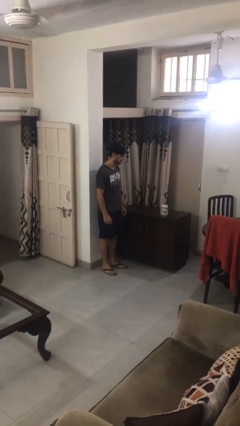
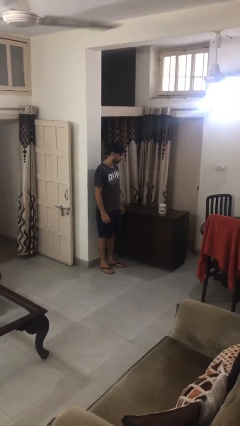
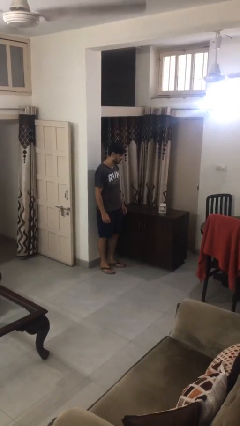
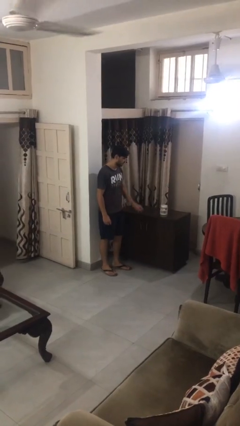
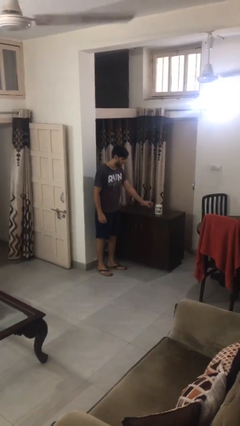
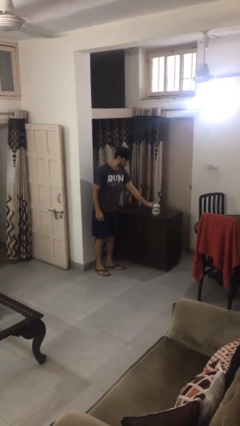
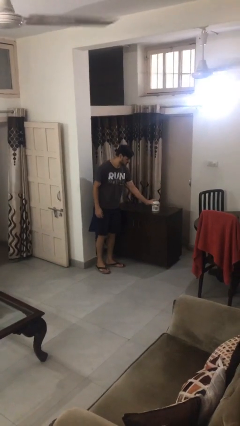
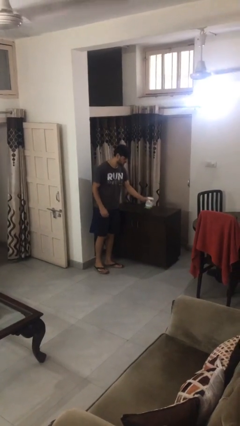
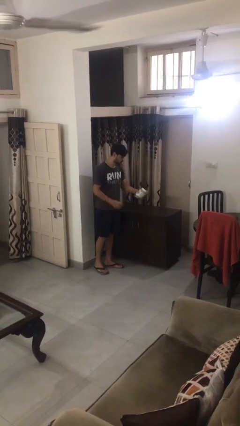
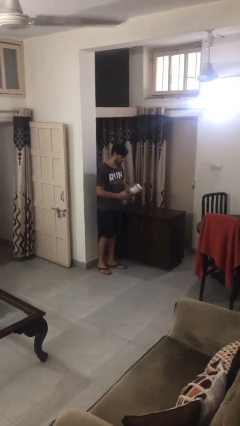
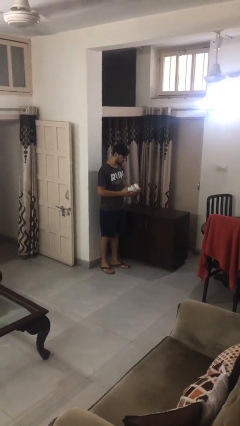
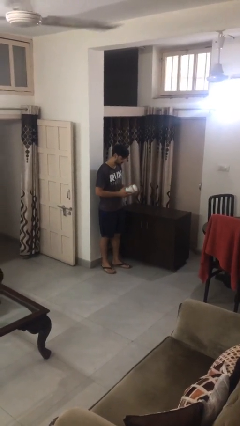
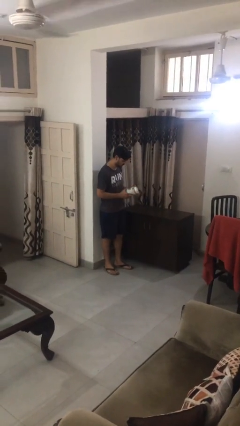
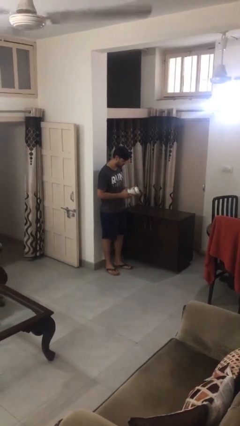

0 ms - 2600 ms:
person picks up object from countertop

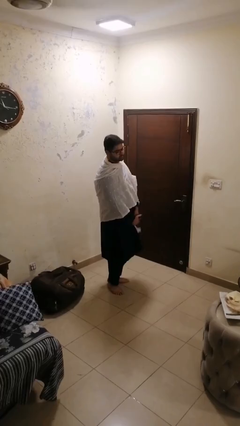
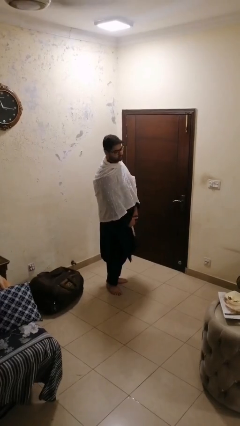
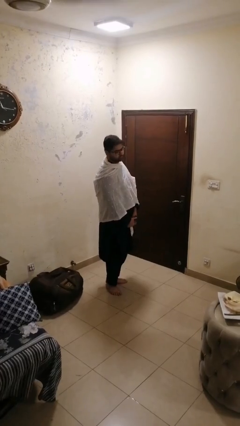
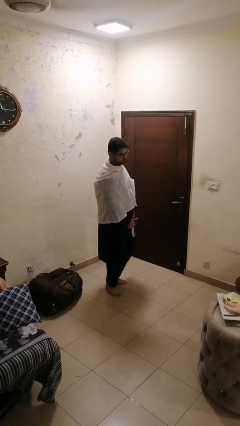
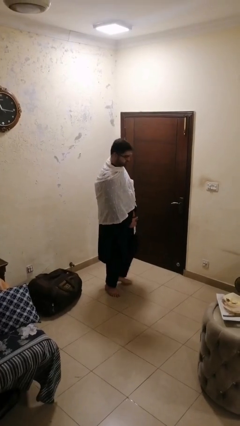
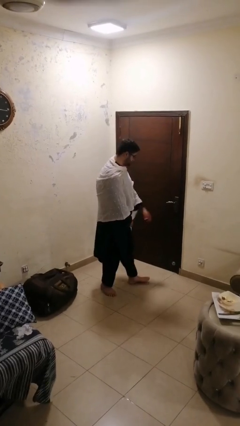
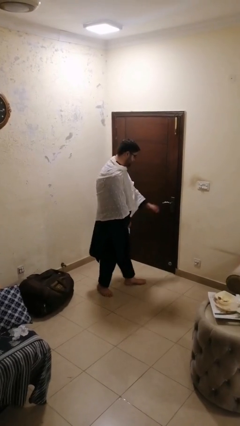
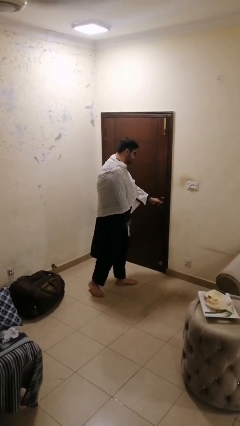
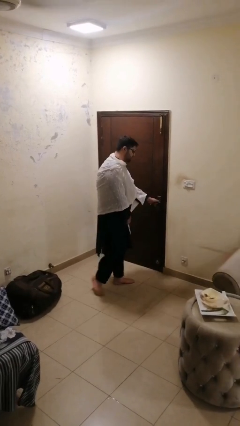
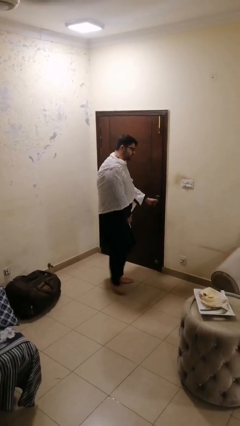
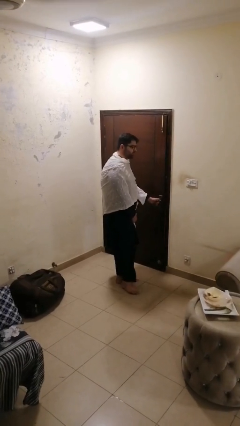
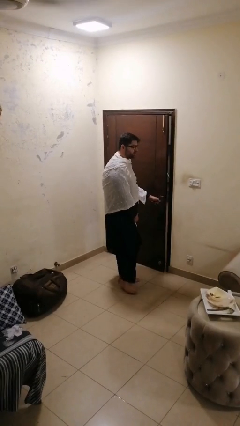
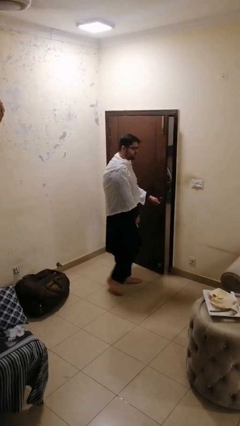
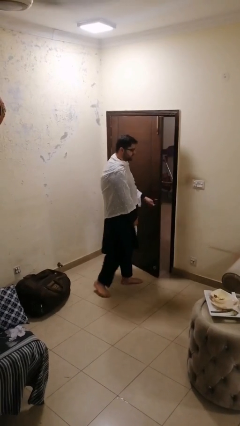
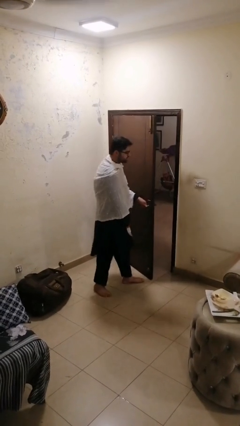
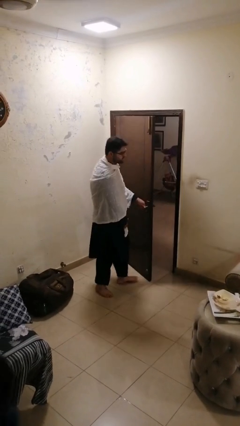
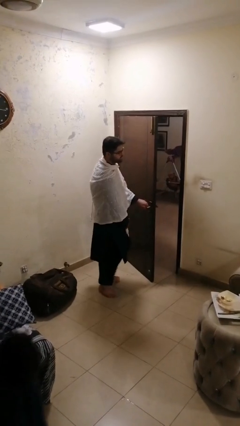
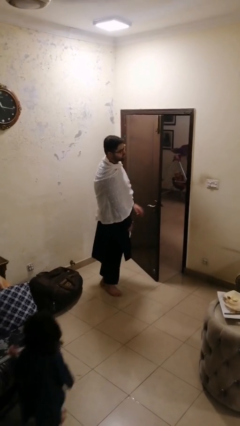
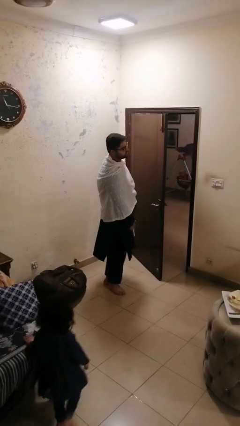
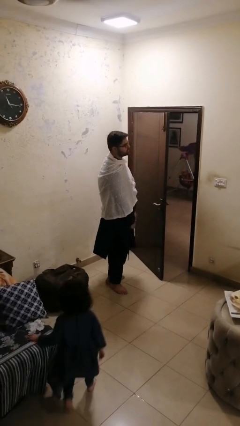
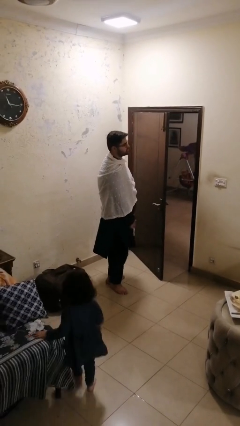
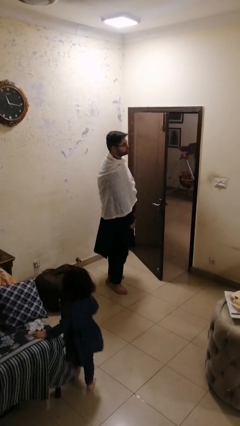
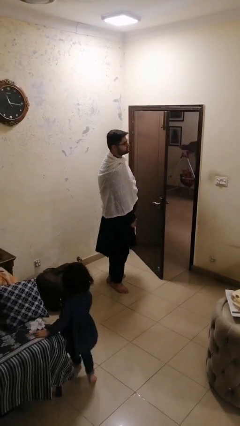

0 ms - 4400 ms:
person opens facility door

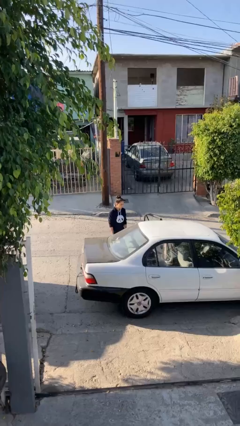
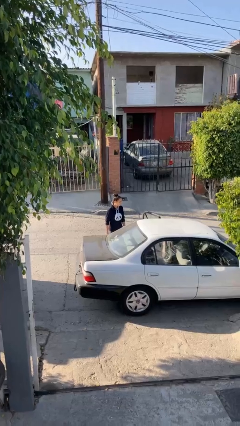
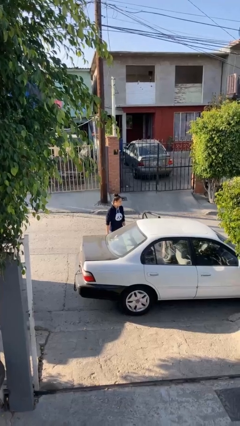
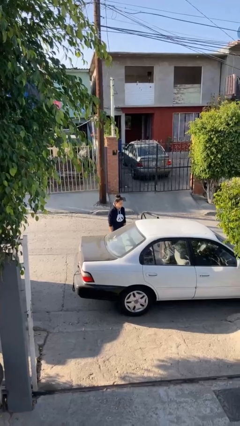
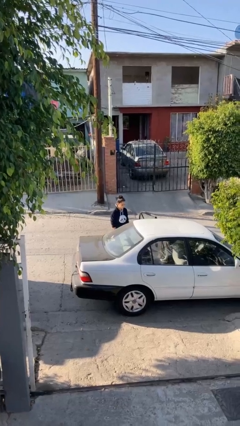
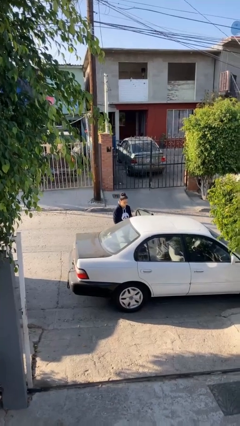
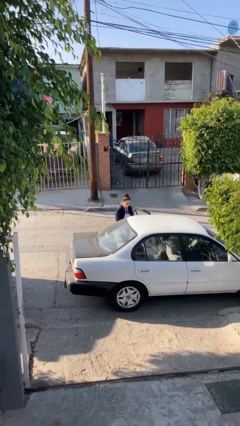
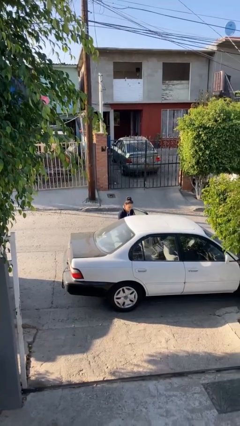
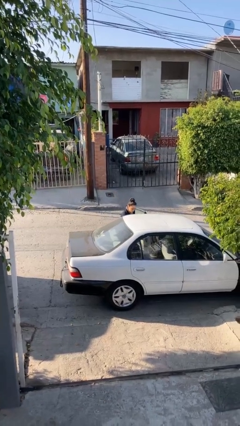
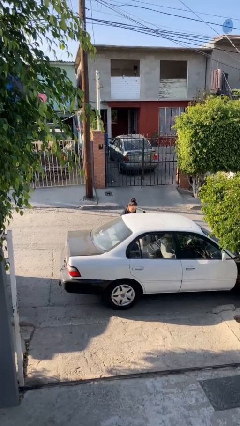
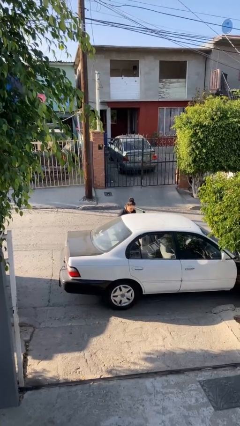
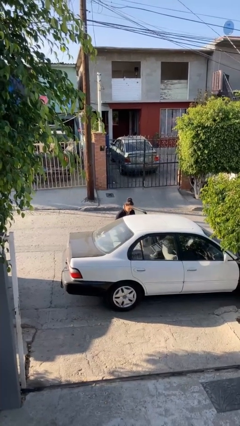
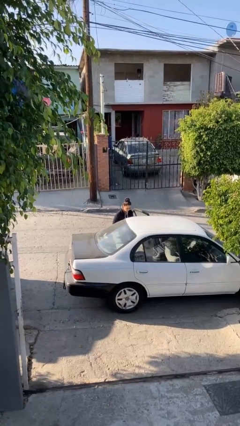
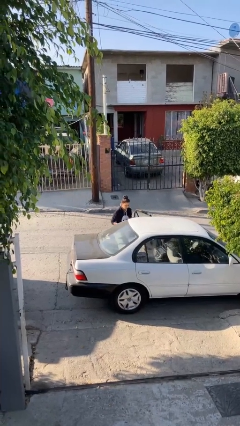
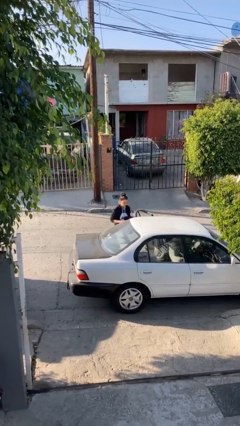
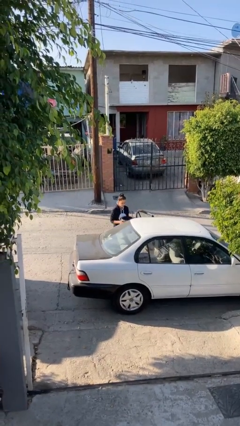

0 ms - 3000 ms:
person unloads car

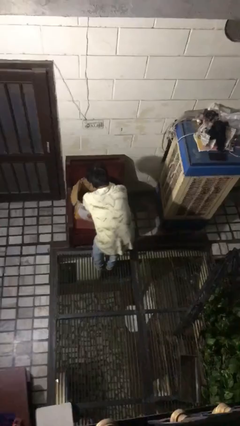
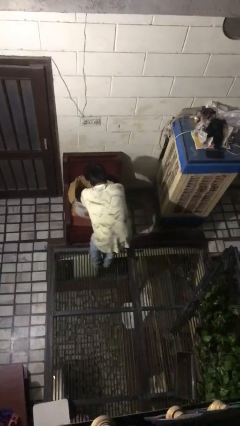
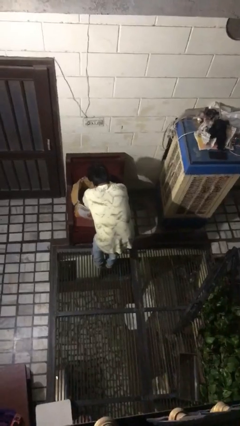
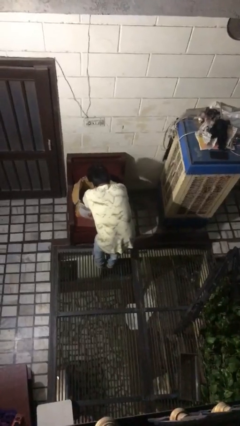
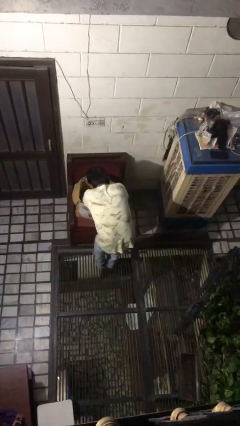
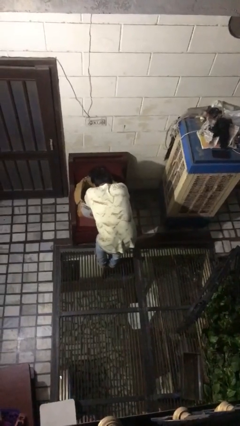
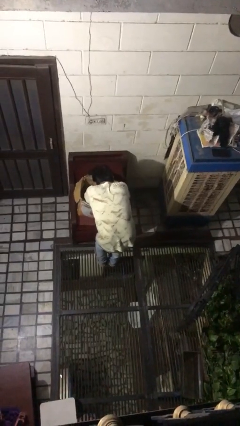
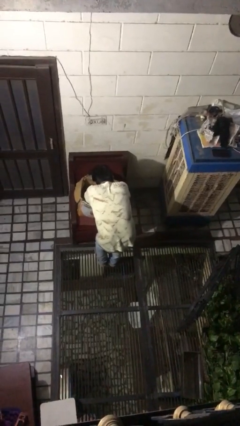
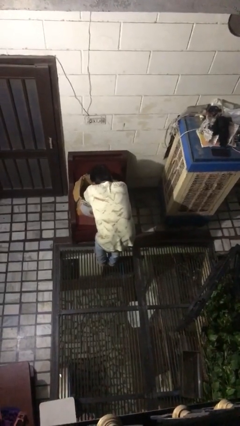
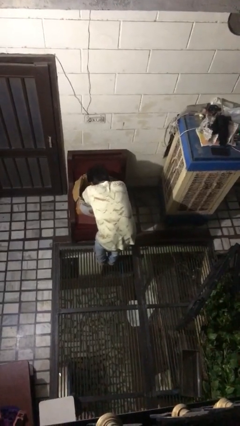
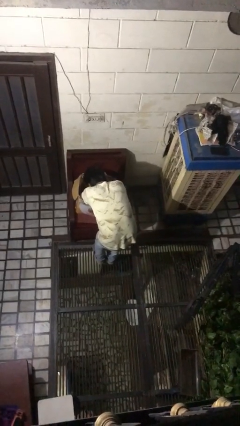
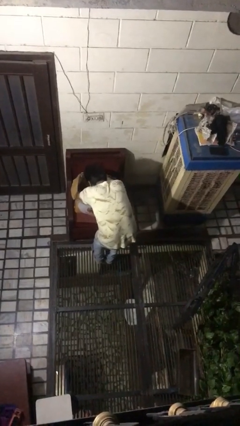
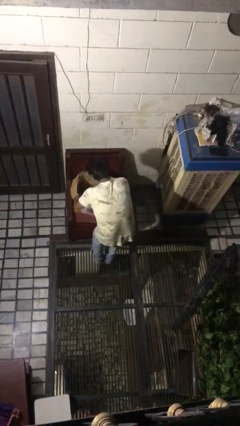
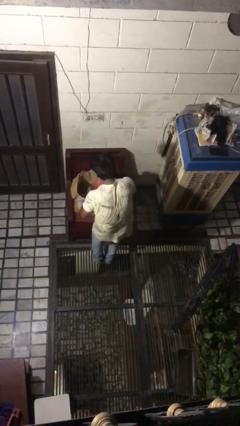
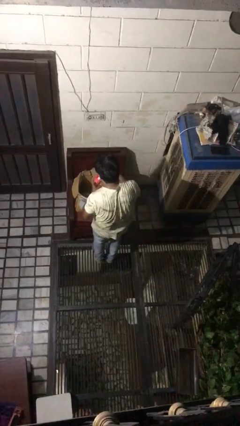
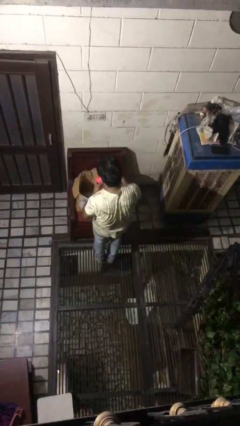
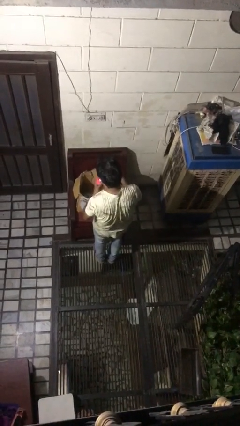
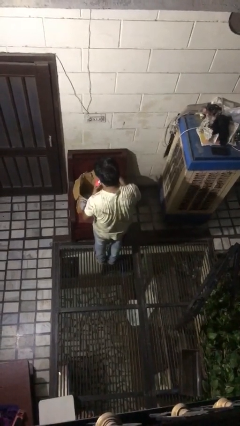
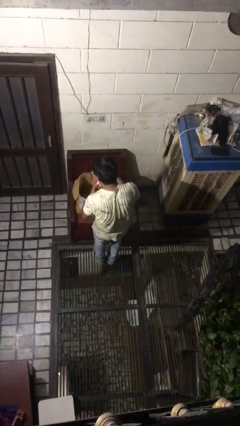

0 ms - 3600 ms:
person searches in box

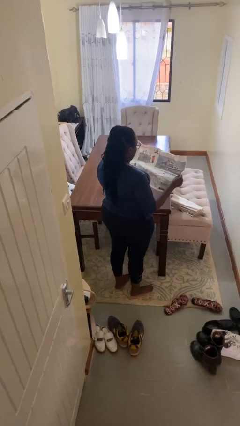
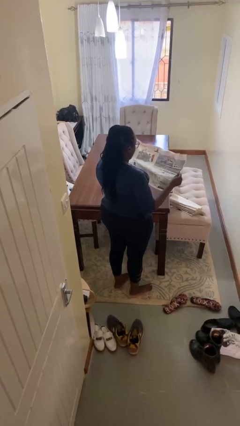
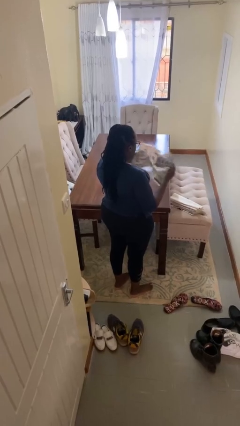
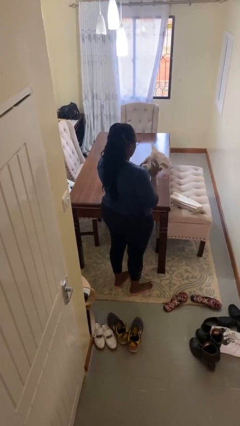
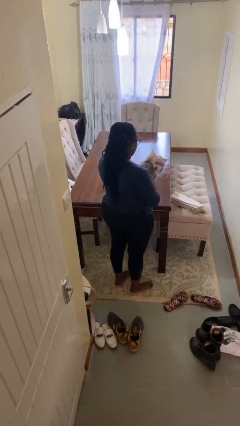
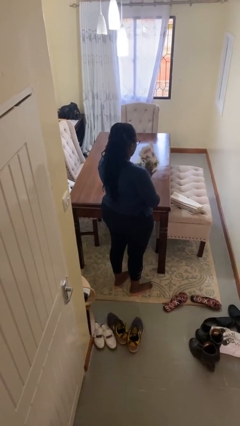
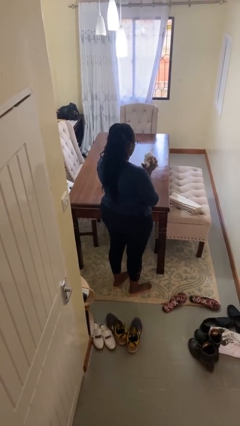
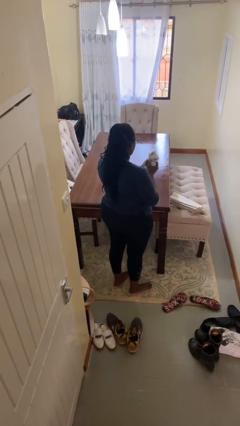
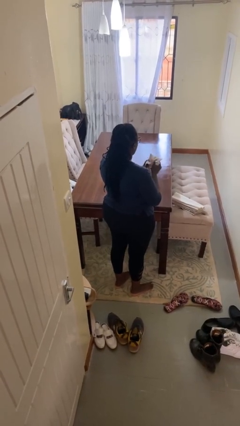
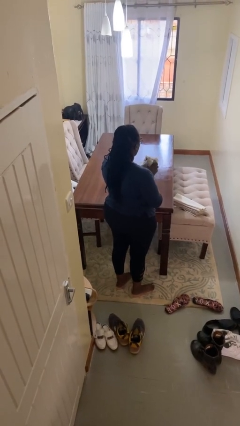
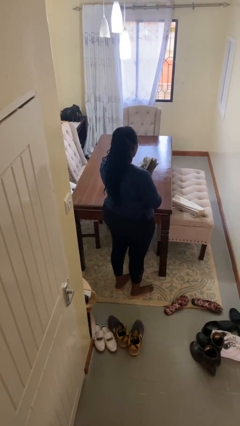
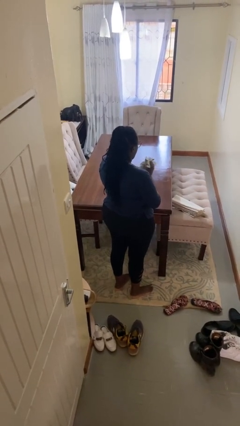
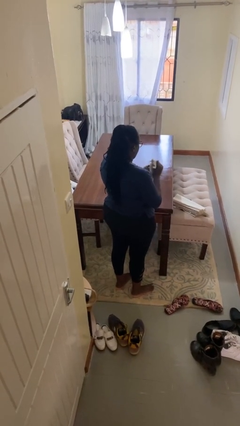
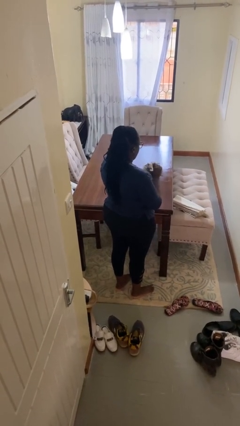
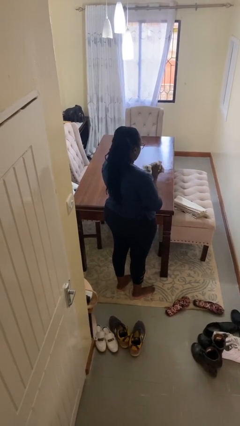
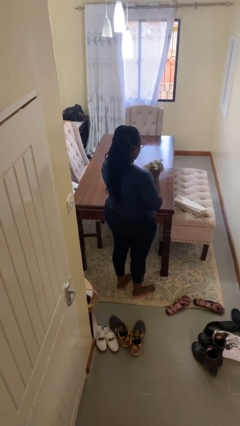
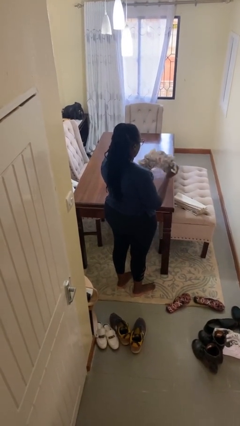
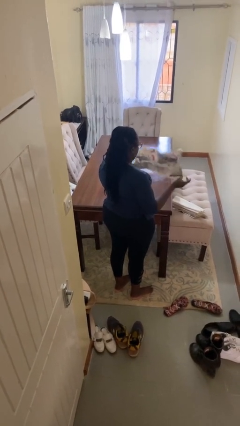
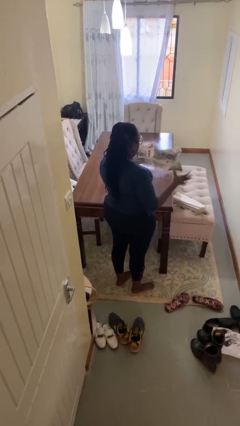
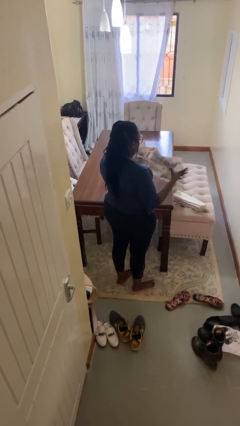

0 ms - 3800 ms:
person crumples paper
